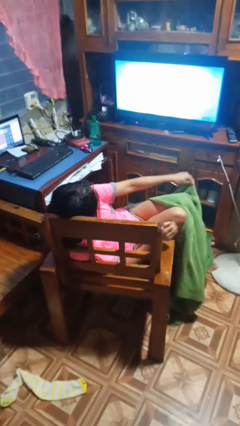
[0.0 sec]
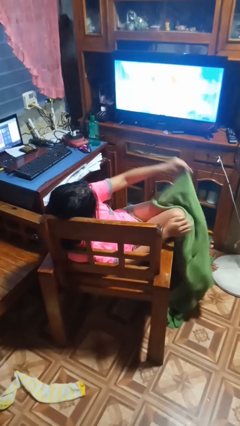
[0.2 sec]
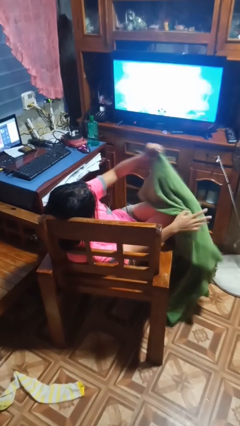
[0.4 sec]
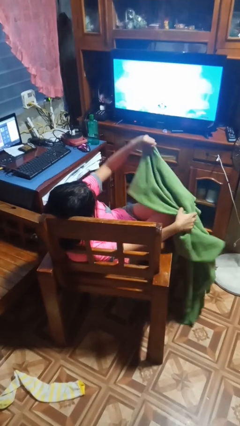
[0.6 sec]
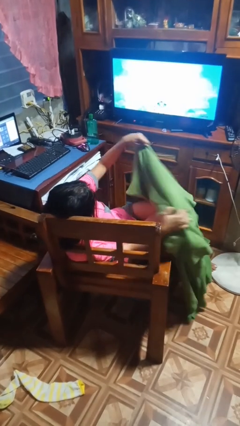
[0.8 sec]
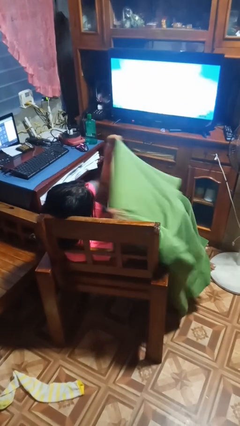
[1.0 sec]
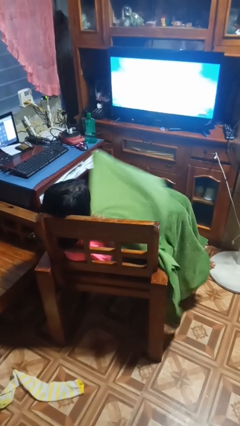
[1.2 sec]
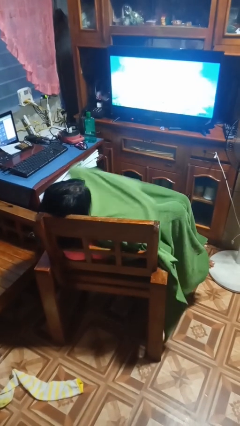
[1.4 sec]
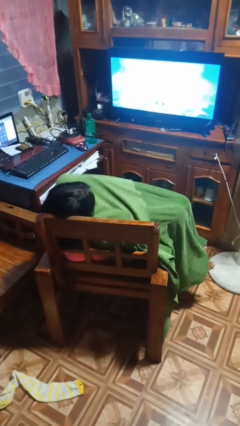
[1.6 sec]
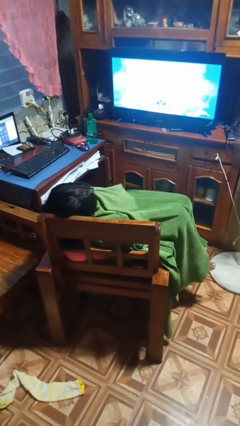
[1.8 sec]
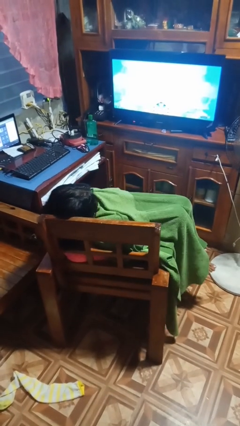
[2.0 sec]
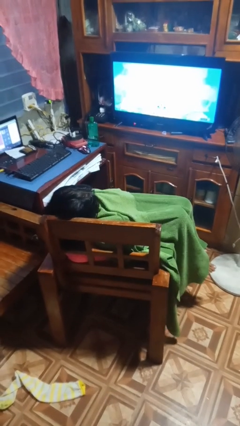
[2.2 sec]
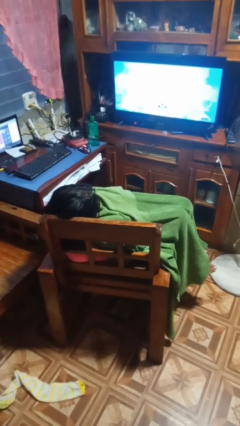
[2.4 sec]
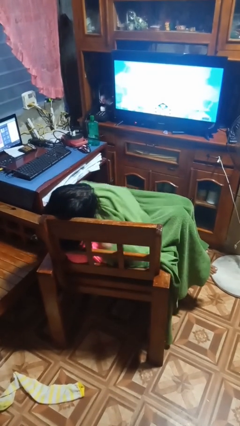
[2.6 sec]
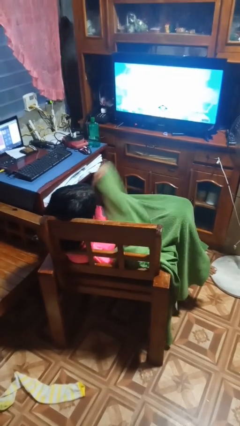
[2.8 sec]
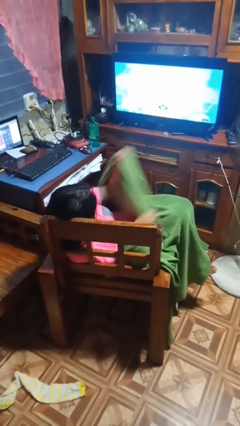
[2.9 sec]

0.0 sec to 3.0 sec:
person covers with blanket

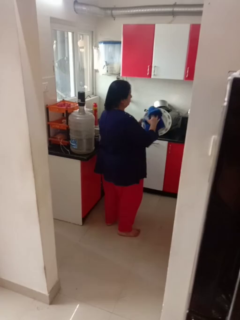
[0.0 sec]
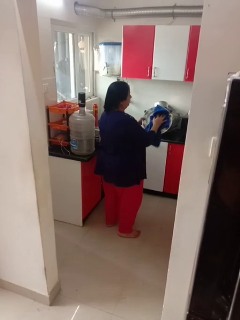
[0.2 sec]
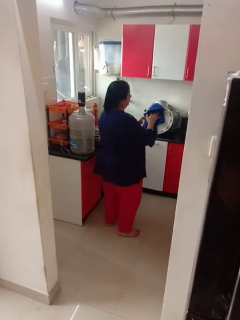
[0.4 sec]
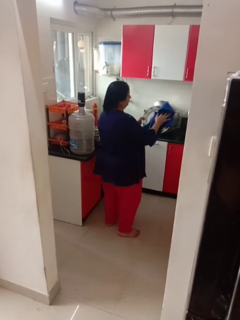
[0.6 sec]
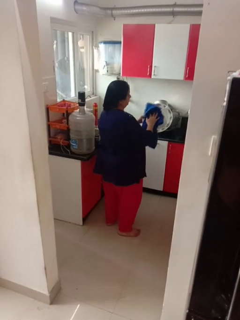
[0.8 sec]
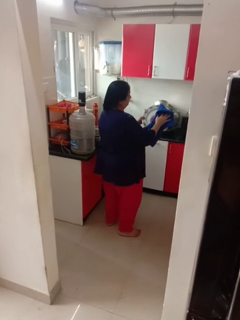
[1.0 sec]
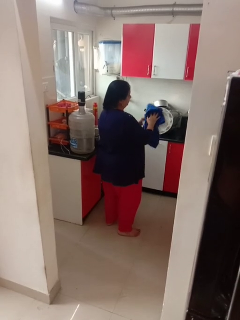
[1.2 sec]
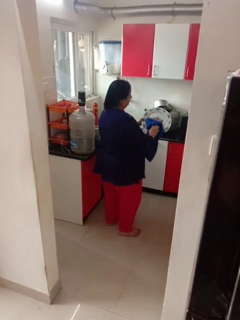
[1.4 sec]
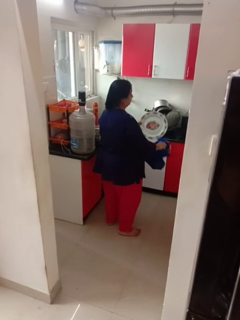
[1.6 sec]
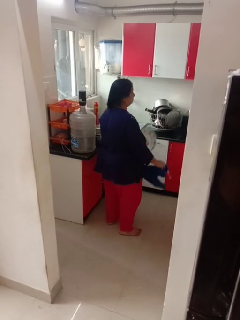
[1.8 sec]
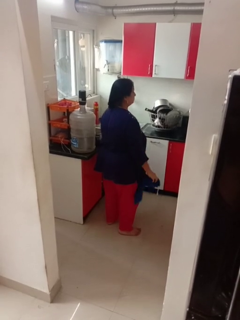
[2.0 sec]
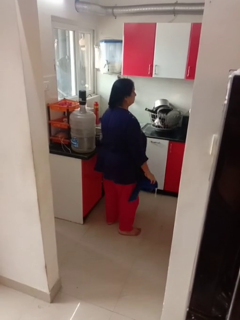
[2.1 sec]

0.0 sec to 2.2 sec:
person dries dish

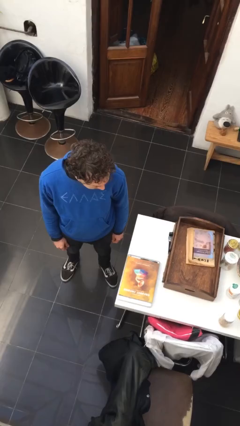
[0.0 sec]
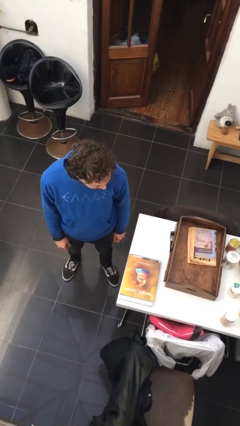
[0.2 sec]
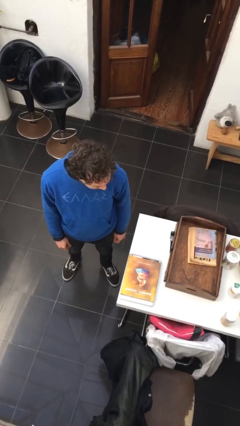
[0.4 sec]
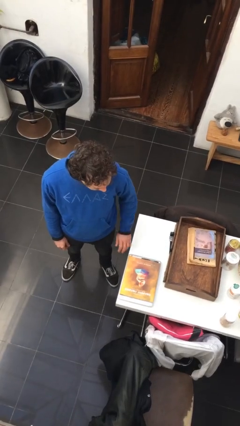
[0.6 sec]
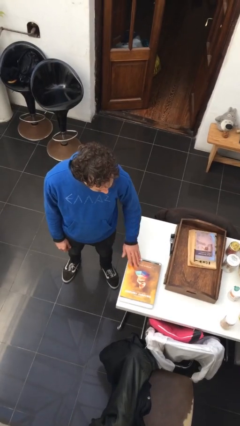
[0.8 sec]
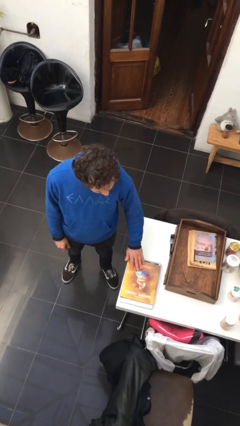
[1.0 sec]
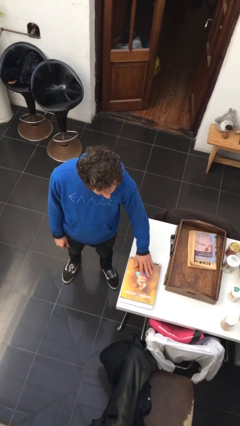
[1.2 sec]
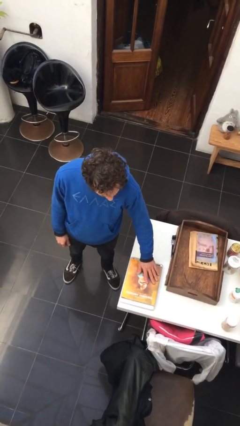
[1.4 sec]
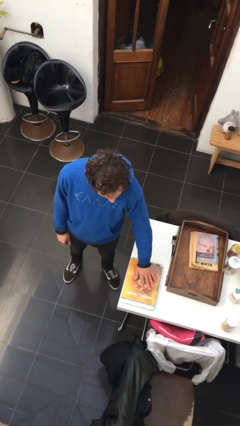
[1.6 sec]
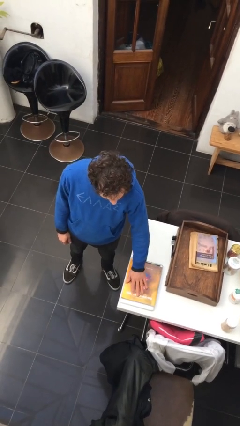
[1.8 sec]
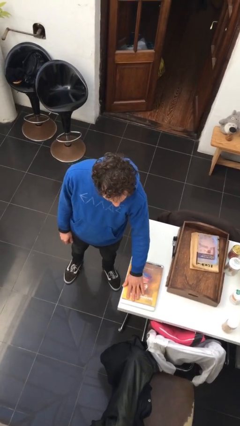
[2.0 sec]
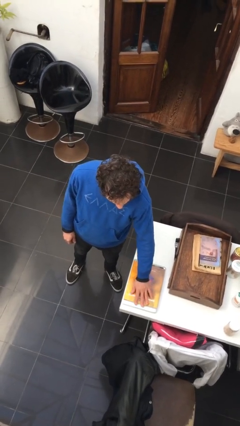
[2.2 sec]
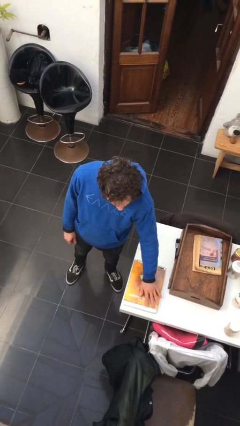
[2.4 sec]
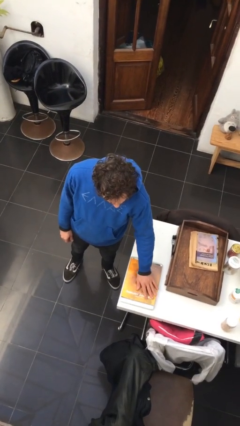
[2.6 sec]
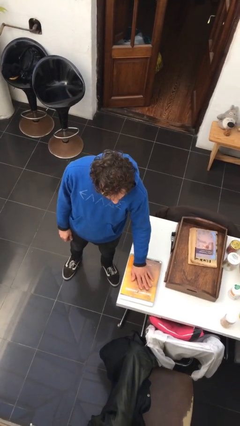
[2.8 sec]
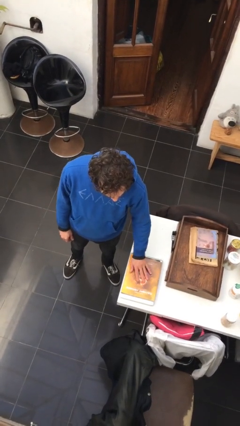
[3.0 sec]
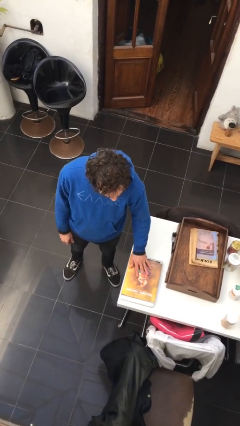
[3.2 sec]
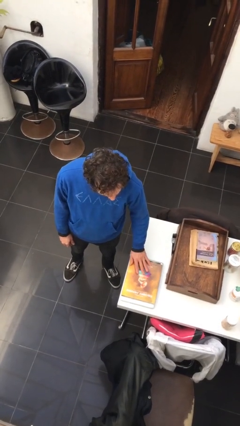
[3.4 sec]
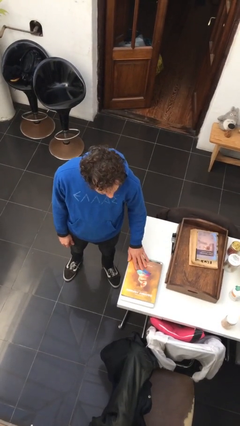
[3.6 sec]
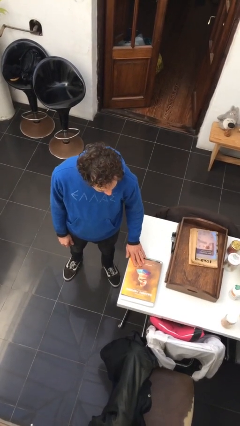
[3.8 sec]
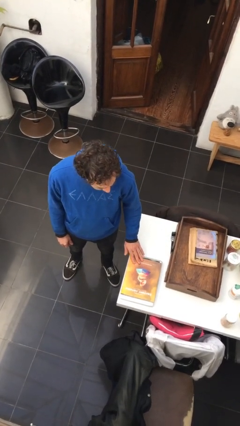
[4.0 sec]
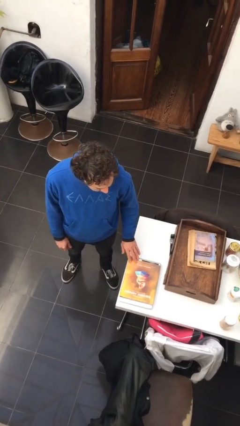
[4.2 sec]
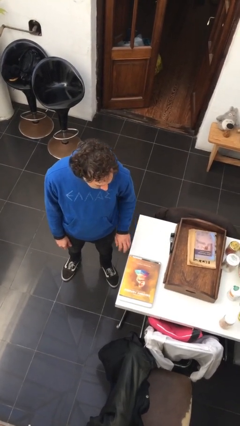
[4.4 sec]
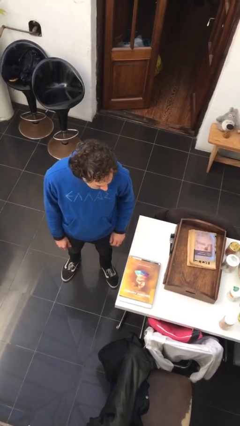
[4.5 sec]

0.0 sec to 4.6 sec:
person waves hand over object

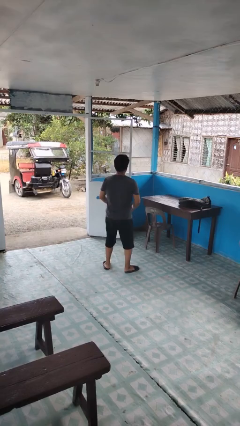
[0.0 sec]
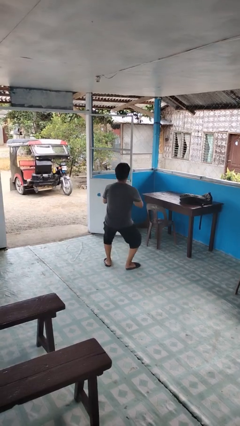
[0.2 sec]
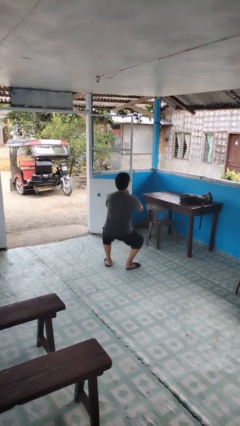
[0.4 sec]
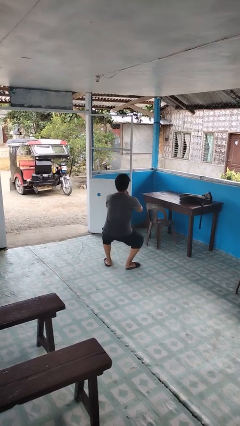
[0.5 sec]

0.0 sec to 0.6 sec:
person squats

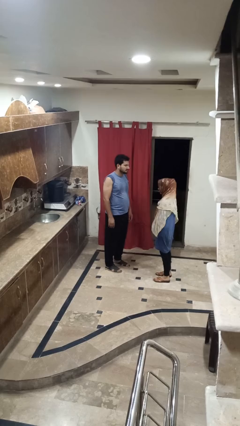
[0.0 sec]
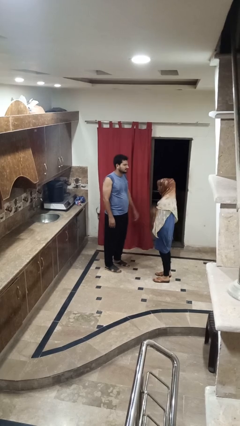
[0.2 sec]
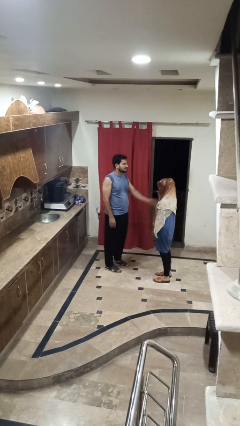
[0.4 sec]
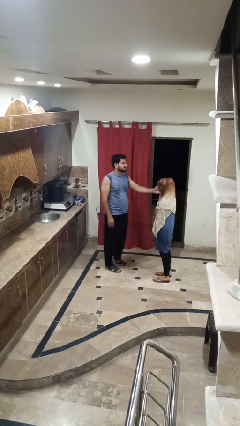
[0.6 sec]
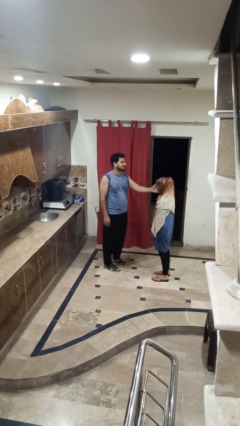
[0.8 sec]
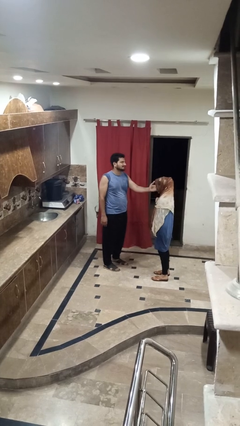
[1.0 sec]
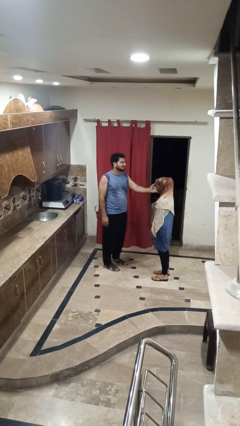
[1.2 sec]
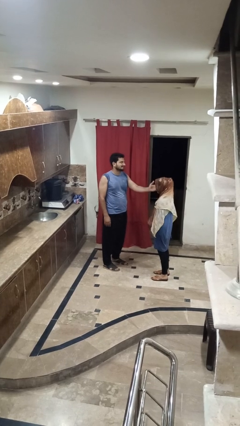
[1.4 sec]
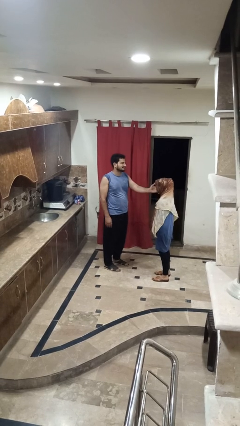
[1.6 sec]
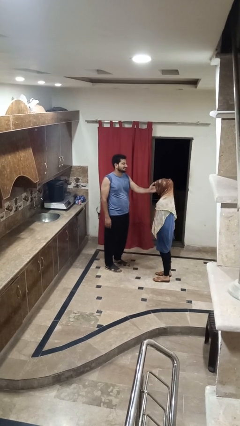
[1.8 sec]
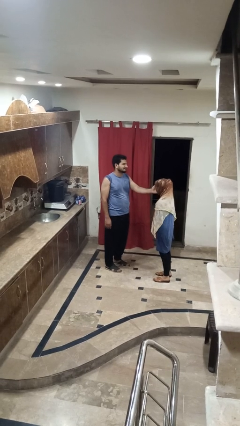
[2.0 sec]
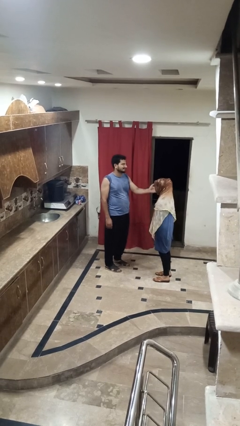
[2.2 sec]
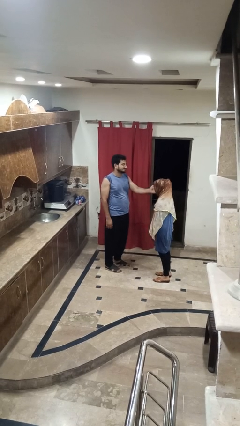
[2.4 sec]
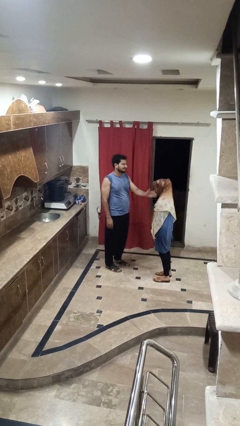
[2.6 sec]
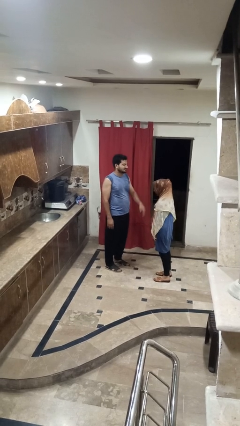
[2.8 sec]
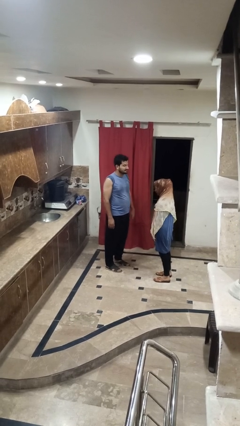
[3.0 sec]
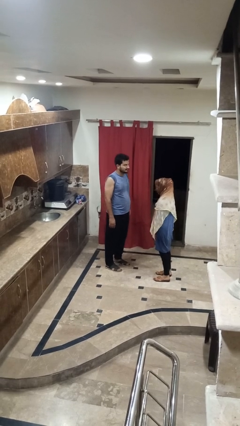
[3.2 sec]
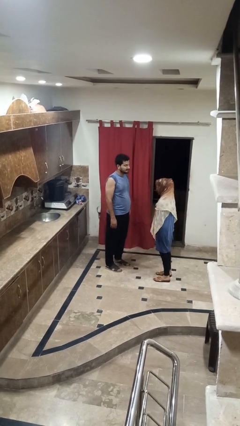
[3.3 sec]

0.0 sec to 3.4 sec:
person touches face of person

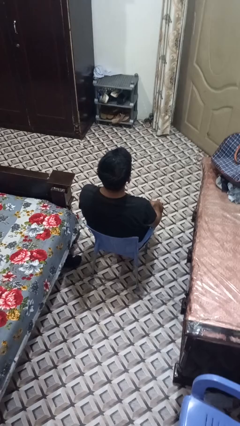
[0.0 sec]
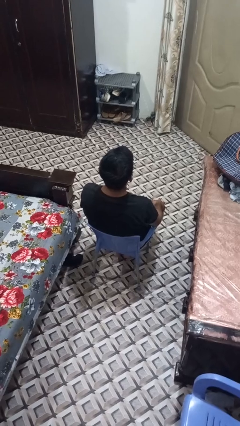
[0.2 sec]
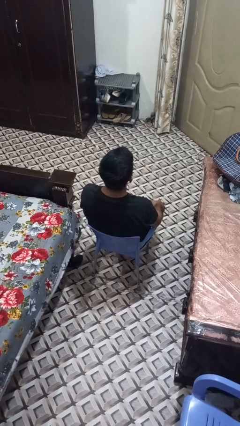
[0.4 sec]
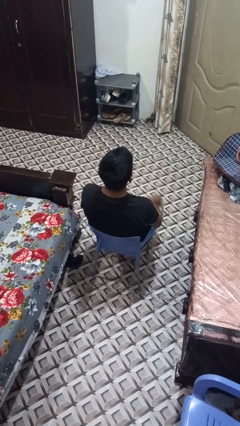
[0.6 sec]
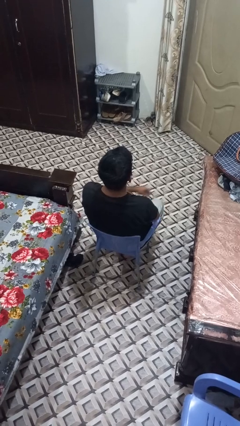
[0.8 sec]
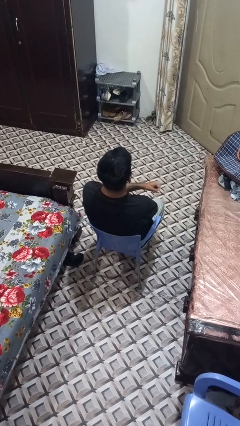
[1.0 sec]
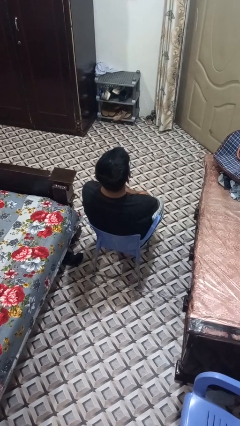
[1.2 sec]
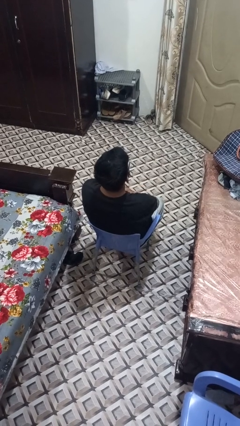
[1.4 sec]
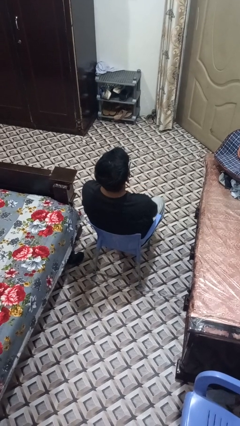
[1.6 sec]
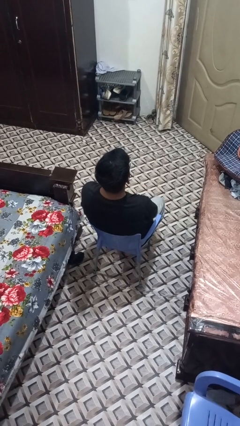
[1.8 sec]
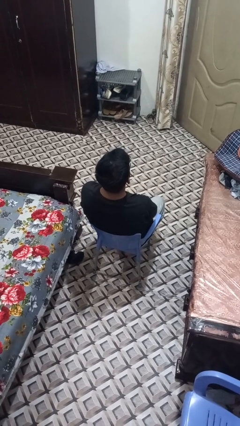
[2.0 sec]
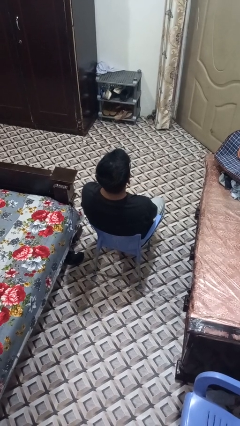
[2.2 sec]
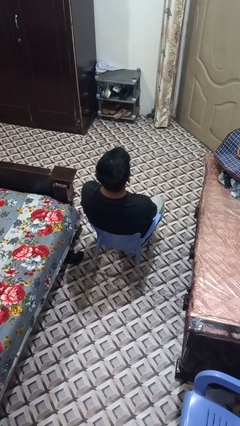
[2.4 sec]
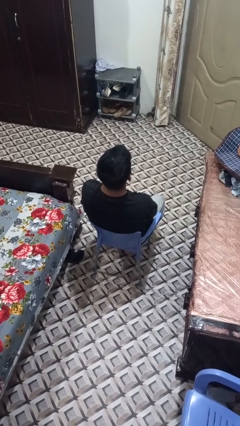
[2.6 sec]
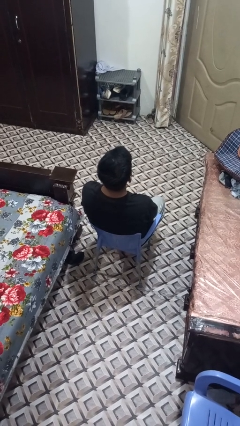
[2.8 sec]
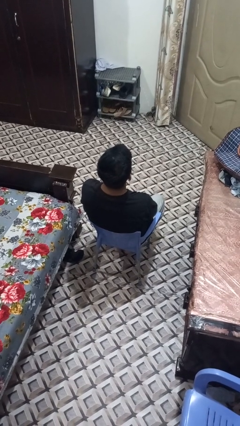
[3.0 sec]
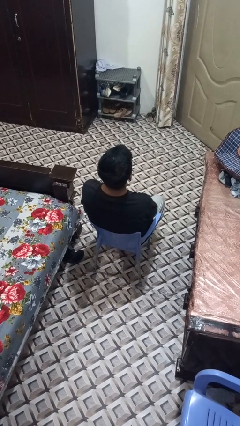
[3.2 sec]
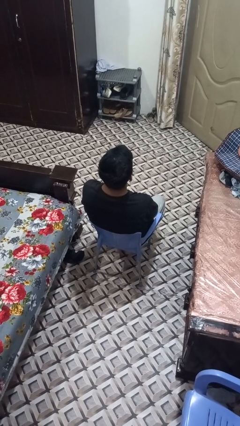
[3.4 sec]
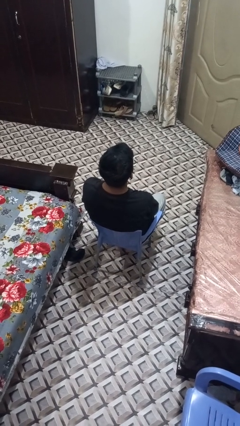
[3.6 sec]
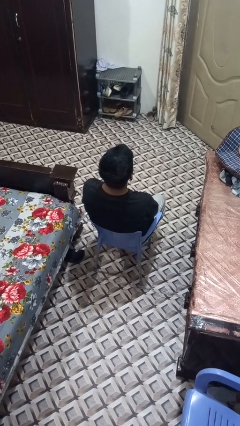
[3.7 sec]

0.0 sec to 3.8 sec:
person crosses arms
